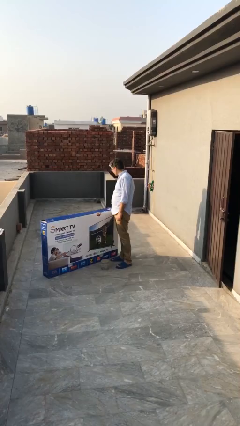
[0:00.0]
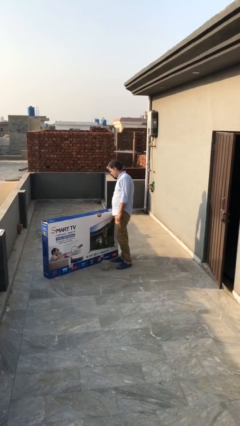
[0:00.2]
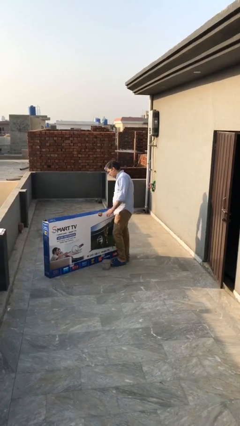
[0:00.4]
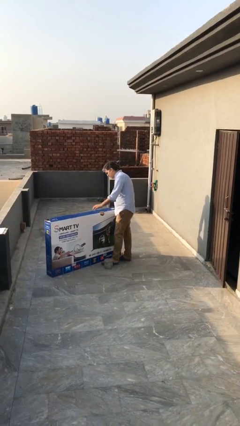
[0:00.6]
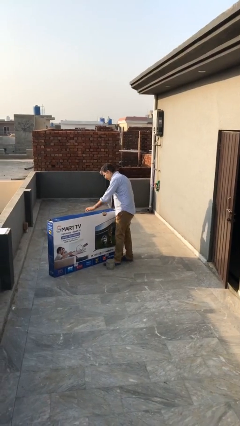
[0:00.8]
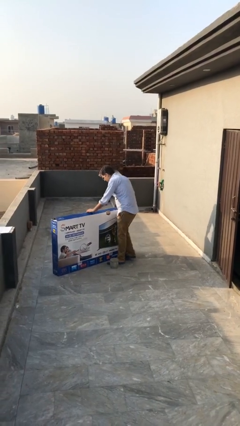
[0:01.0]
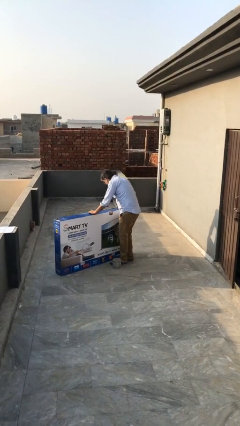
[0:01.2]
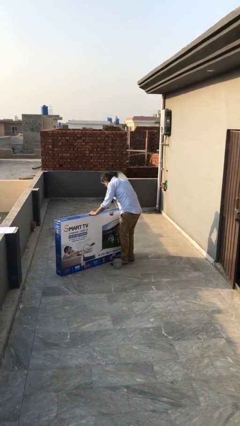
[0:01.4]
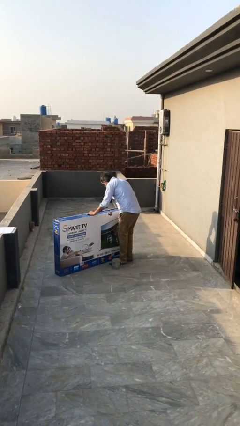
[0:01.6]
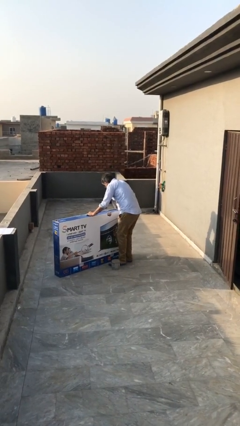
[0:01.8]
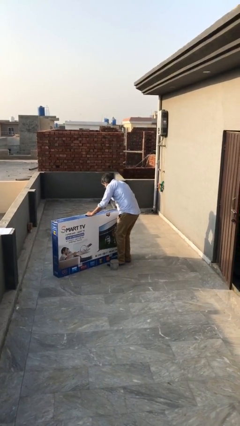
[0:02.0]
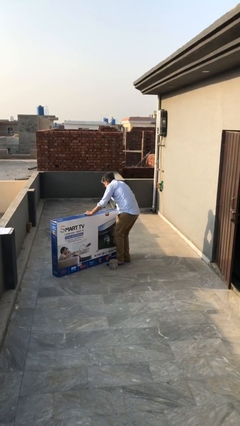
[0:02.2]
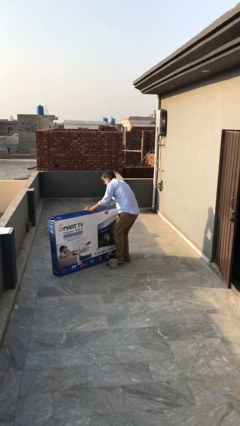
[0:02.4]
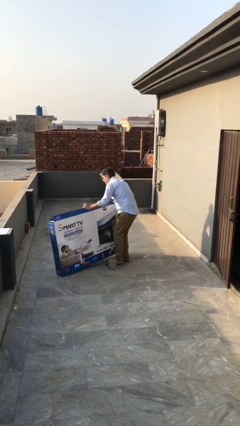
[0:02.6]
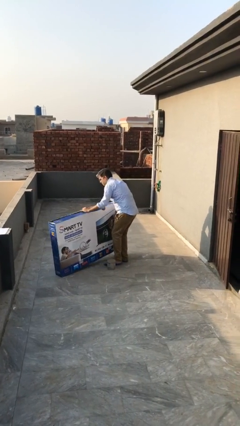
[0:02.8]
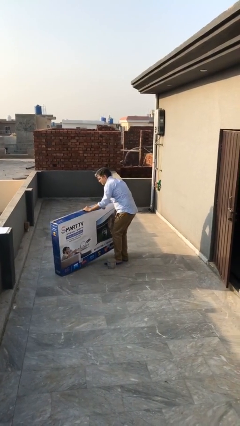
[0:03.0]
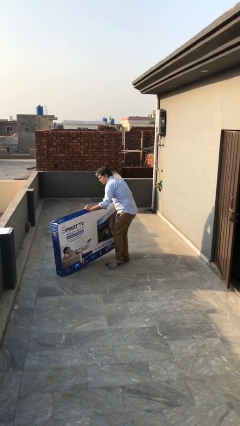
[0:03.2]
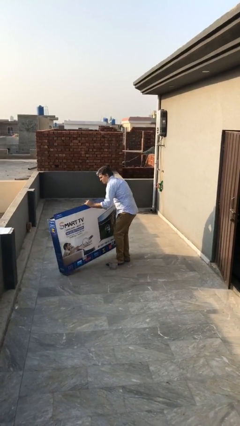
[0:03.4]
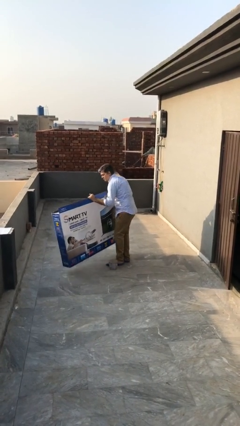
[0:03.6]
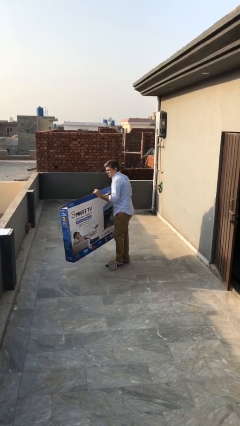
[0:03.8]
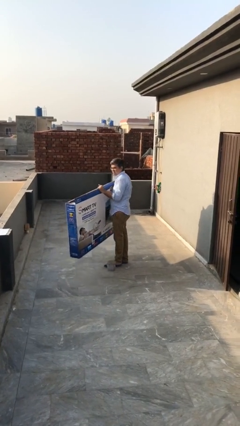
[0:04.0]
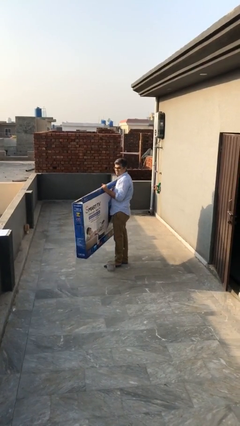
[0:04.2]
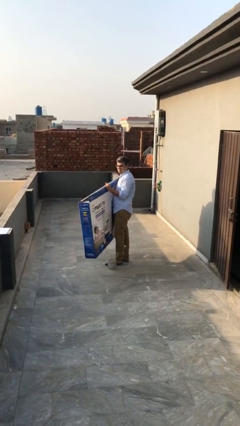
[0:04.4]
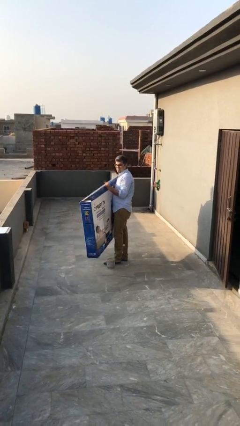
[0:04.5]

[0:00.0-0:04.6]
person picks up object from floor

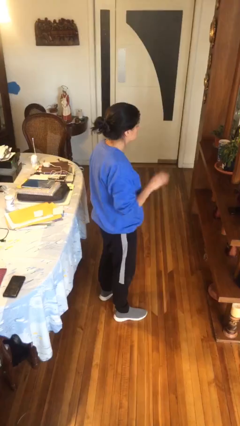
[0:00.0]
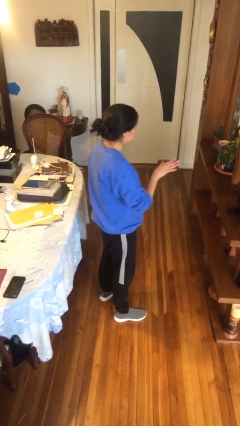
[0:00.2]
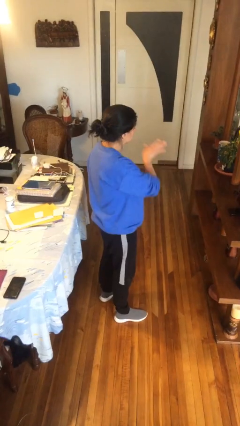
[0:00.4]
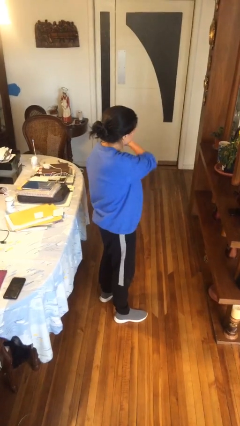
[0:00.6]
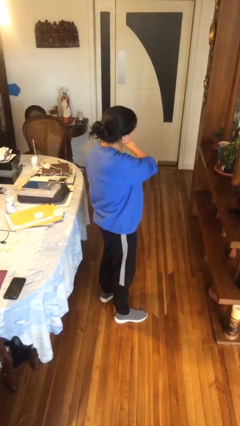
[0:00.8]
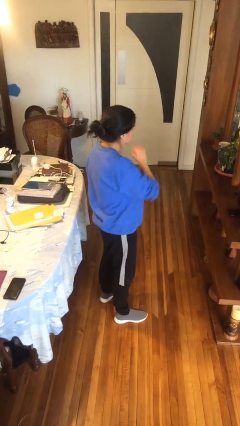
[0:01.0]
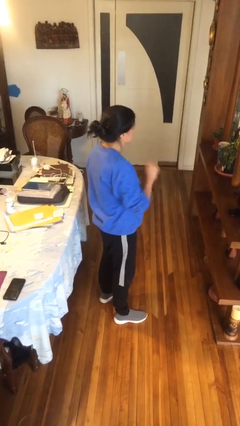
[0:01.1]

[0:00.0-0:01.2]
person gestures swipe left

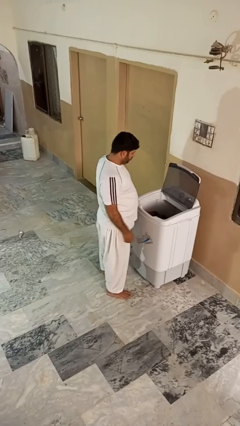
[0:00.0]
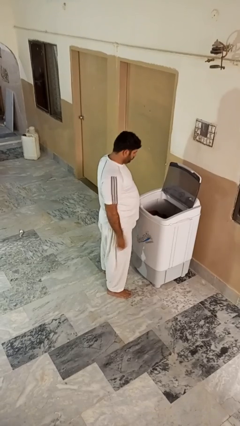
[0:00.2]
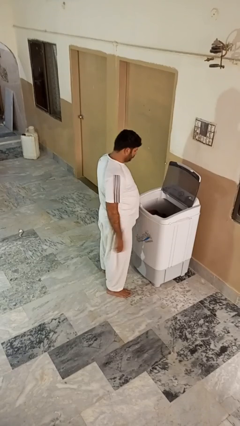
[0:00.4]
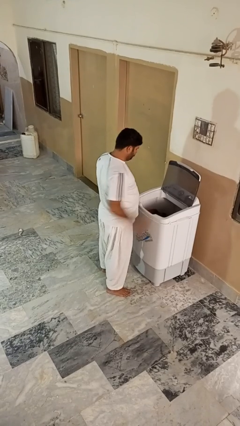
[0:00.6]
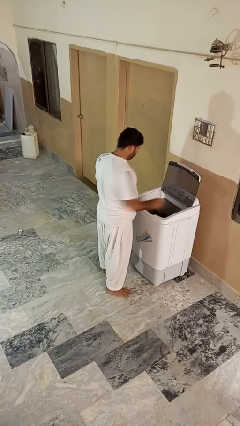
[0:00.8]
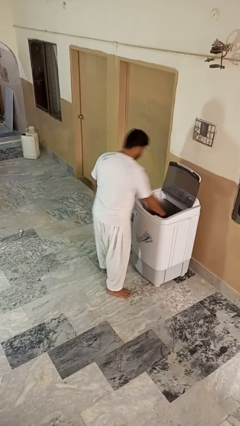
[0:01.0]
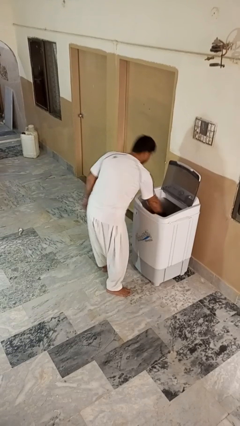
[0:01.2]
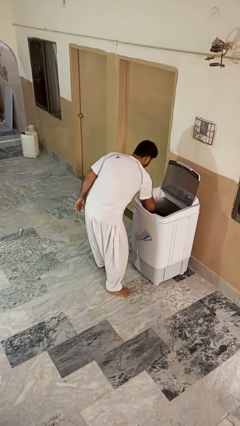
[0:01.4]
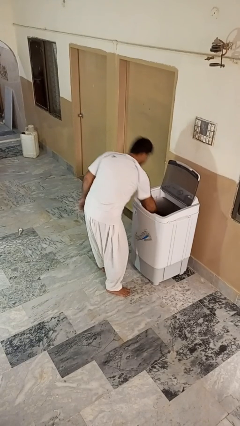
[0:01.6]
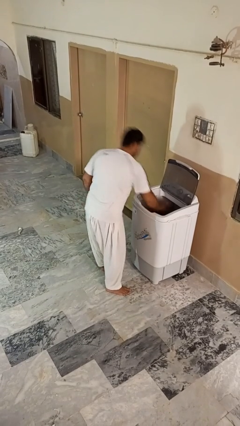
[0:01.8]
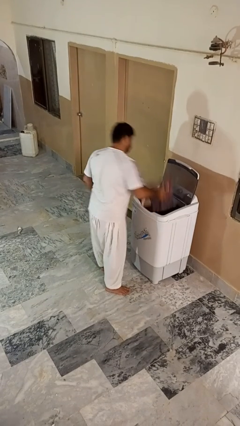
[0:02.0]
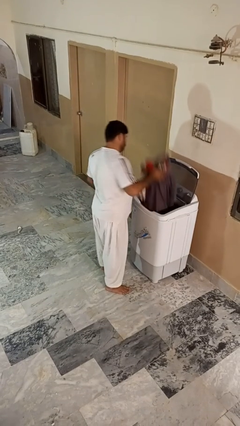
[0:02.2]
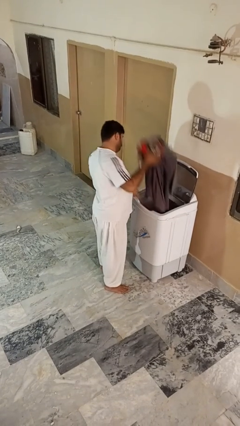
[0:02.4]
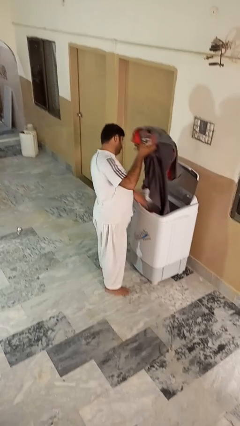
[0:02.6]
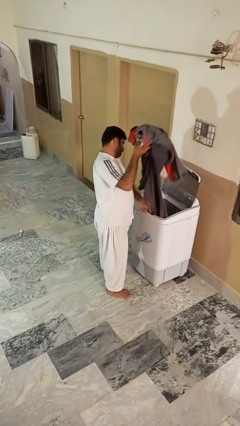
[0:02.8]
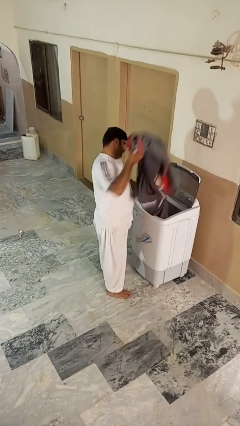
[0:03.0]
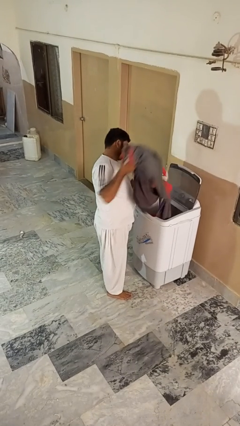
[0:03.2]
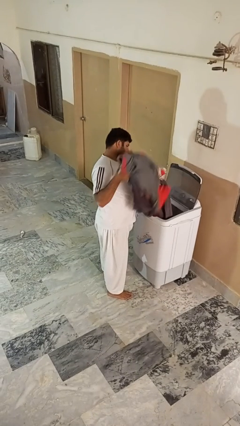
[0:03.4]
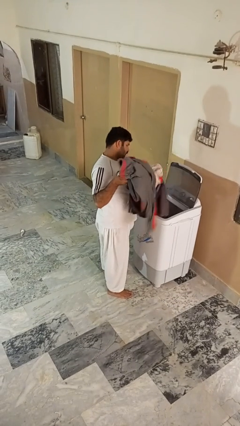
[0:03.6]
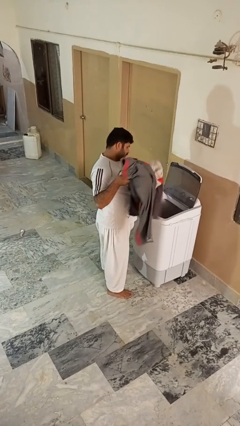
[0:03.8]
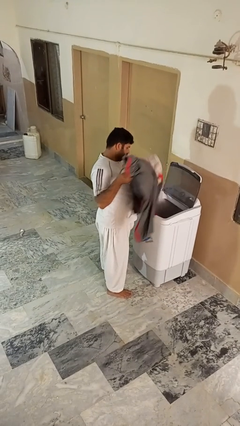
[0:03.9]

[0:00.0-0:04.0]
person unloads clotheswasher

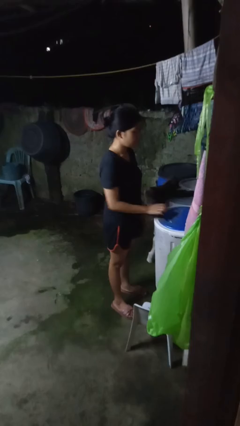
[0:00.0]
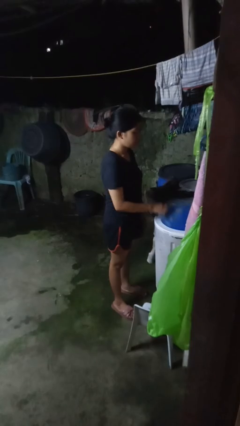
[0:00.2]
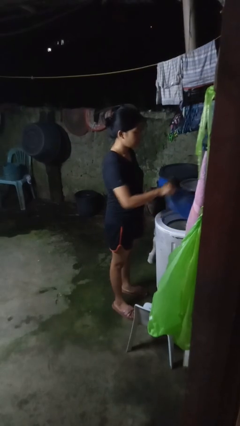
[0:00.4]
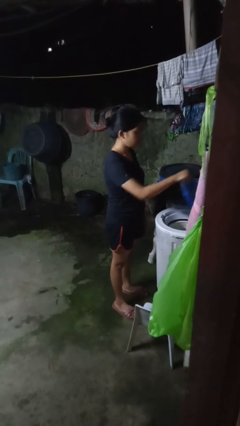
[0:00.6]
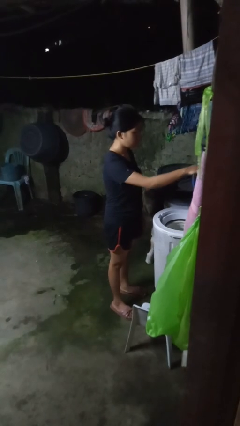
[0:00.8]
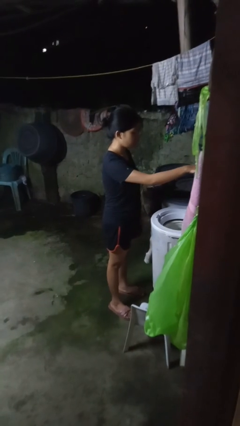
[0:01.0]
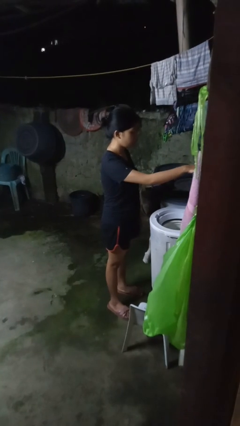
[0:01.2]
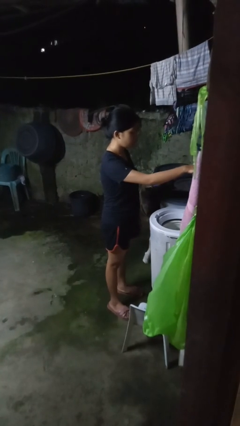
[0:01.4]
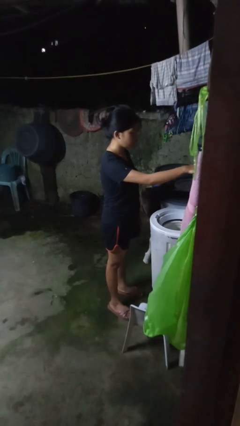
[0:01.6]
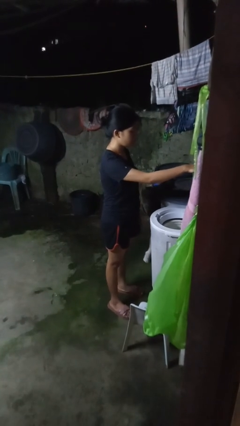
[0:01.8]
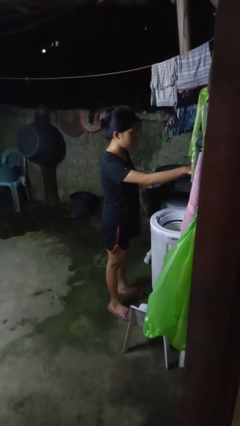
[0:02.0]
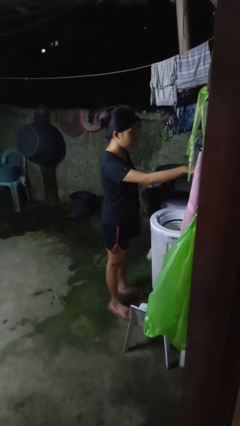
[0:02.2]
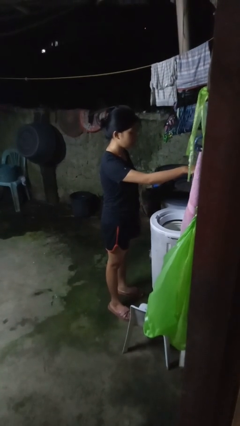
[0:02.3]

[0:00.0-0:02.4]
person opens clothes washer

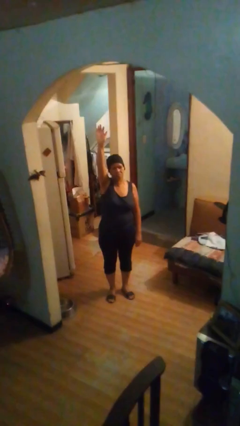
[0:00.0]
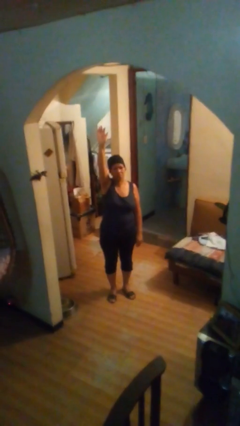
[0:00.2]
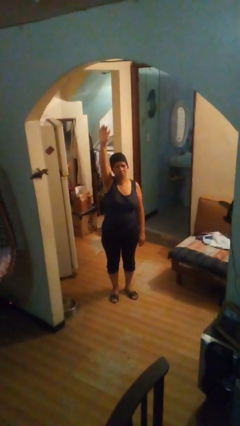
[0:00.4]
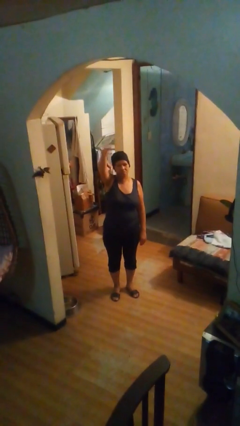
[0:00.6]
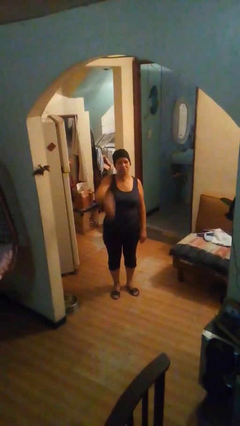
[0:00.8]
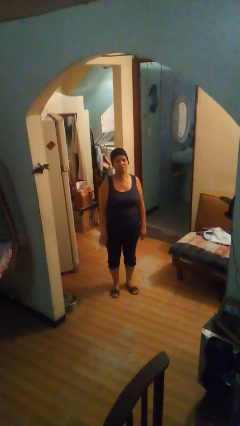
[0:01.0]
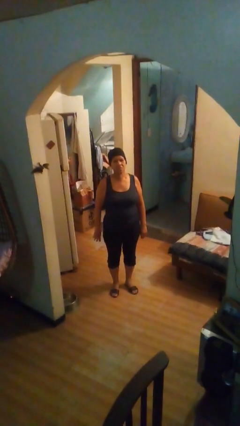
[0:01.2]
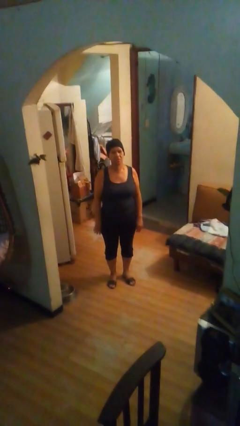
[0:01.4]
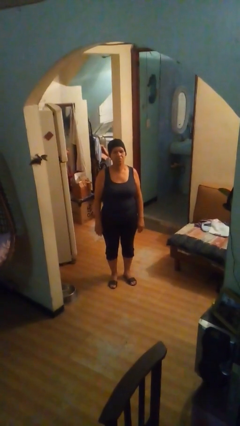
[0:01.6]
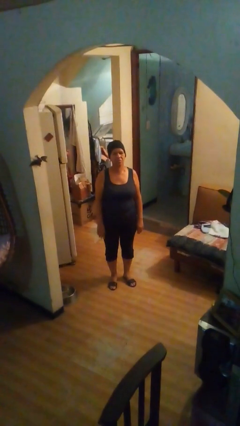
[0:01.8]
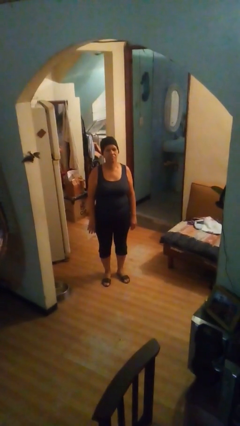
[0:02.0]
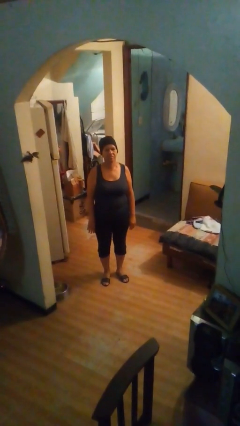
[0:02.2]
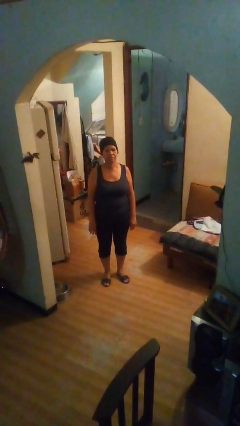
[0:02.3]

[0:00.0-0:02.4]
person gestures lower hand

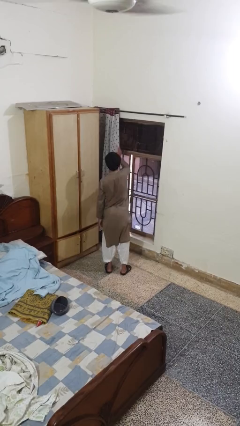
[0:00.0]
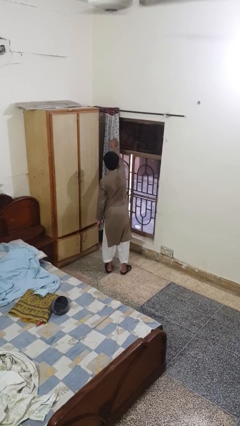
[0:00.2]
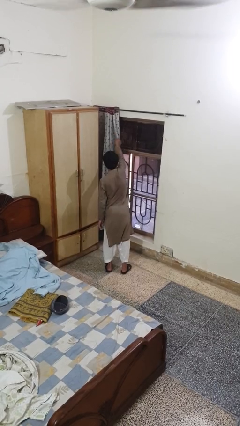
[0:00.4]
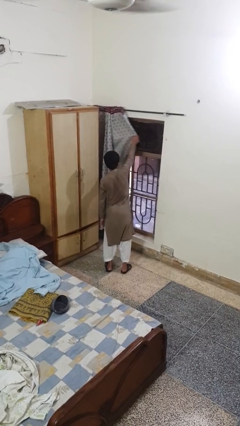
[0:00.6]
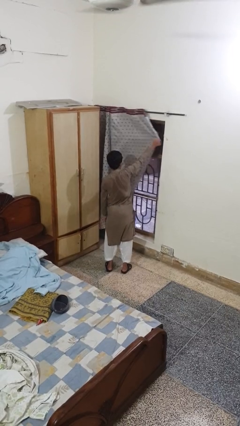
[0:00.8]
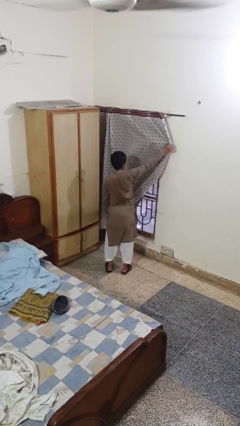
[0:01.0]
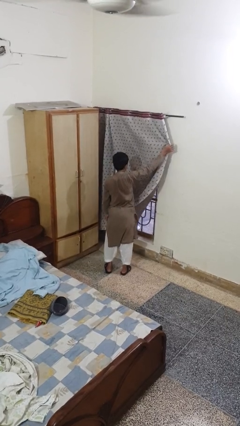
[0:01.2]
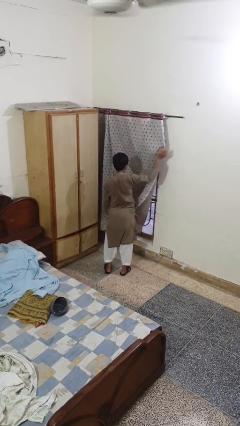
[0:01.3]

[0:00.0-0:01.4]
person closes curtains

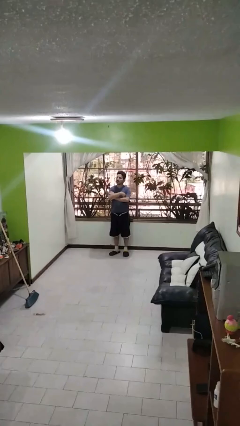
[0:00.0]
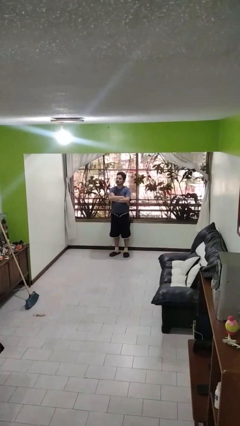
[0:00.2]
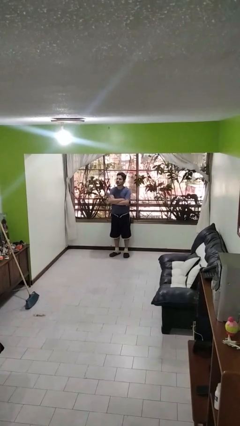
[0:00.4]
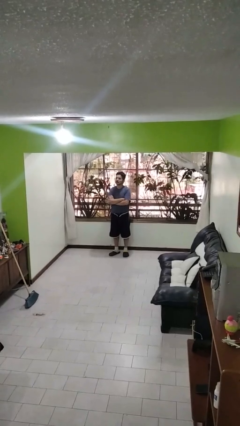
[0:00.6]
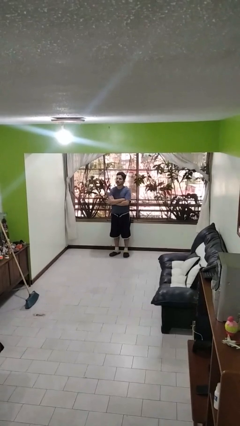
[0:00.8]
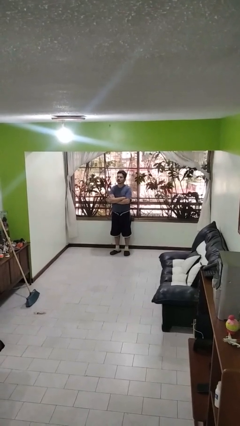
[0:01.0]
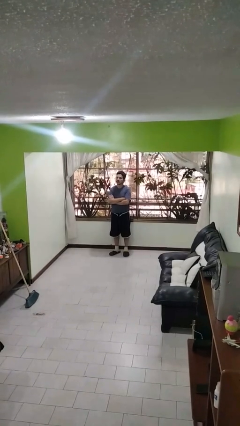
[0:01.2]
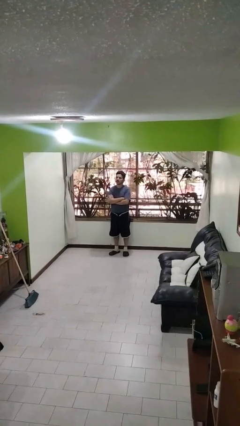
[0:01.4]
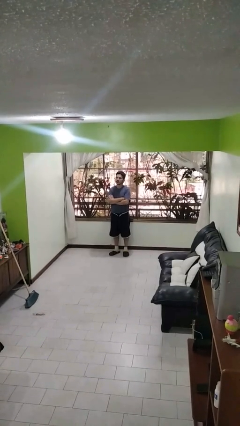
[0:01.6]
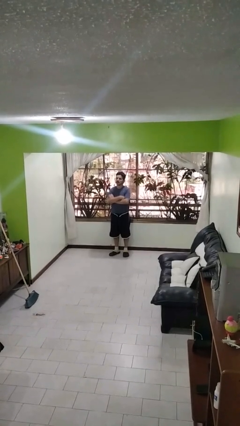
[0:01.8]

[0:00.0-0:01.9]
person crosses arms
